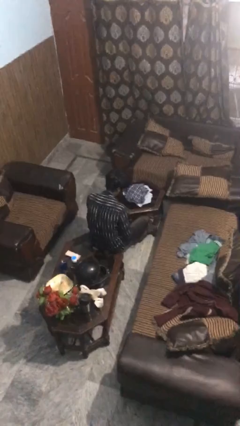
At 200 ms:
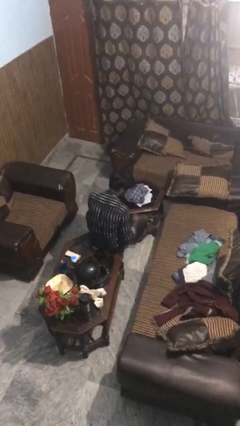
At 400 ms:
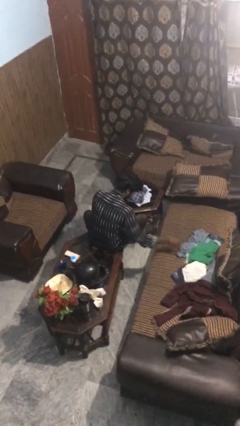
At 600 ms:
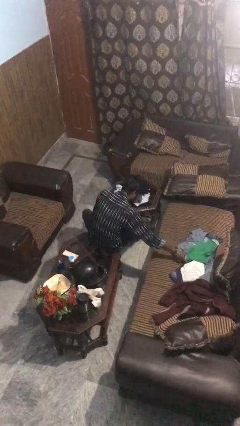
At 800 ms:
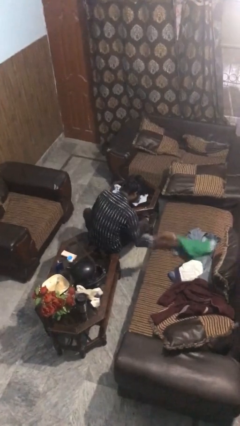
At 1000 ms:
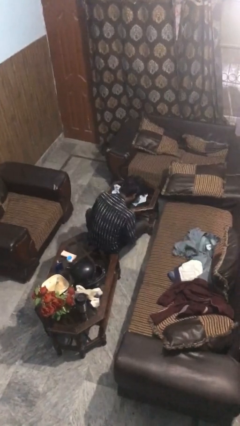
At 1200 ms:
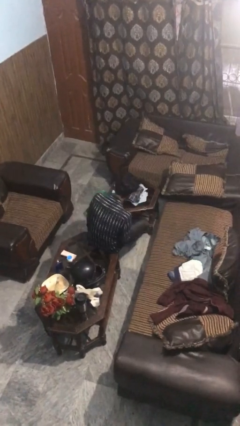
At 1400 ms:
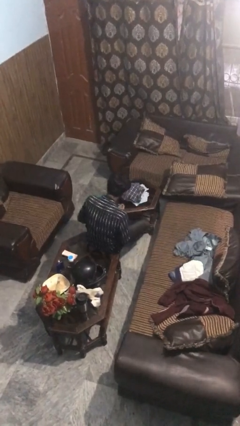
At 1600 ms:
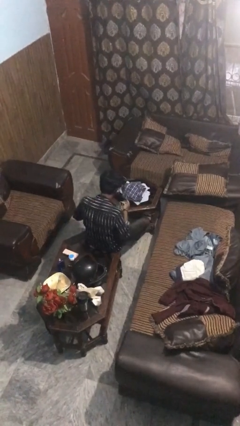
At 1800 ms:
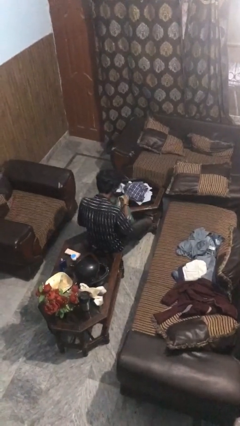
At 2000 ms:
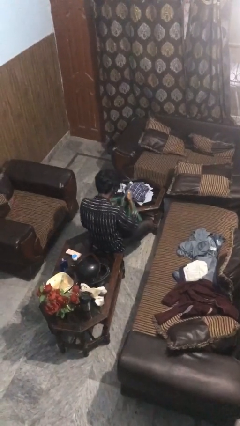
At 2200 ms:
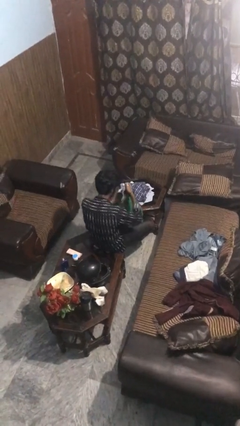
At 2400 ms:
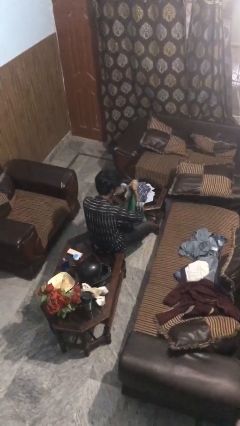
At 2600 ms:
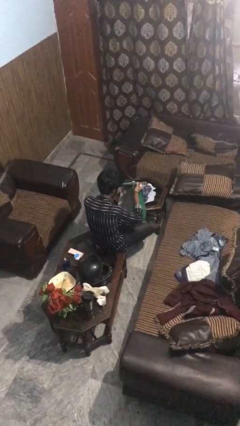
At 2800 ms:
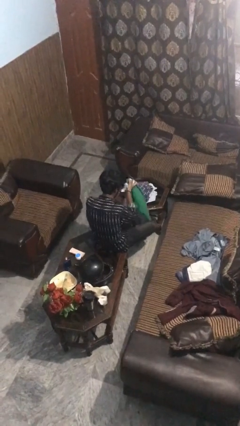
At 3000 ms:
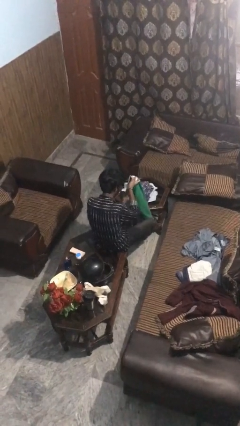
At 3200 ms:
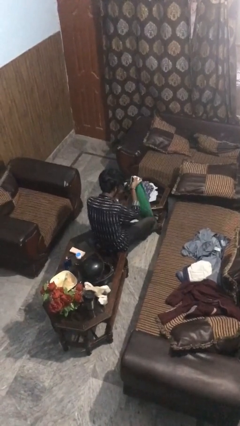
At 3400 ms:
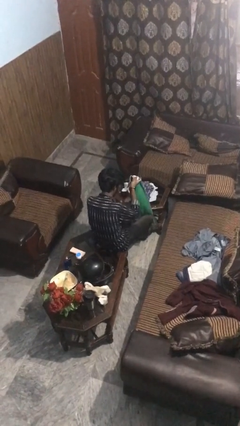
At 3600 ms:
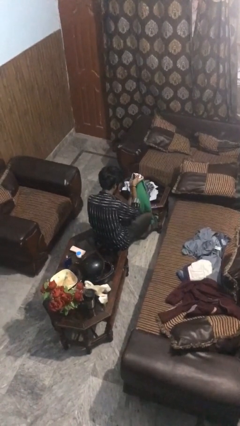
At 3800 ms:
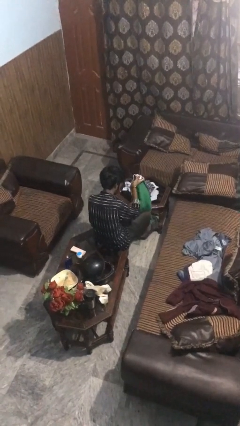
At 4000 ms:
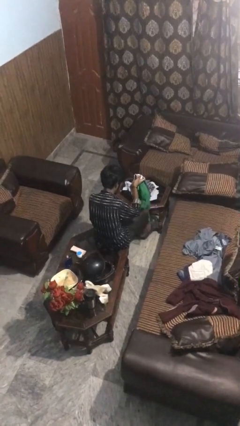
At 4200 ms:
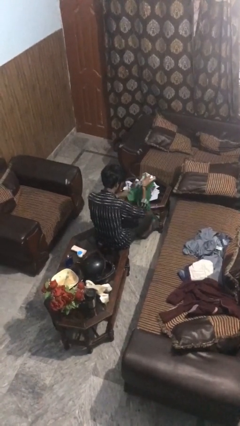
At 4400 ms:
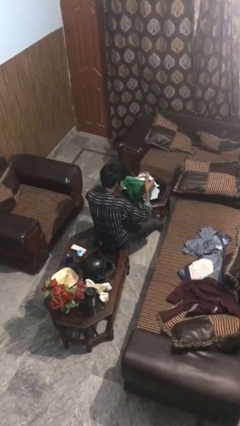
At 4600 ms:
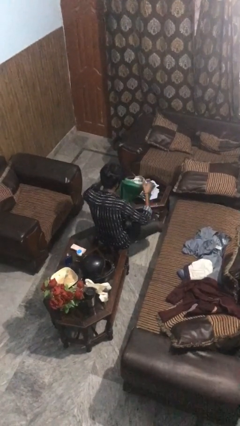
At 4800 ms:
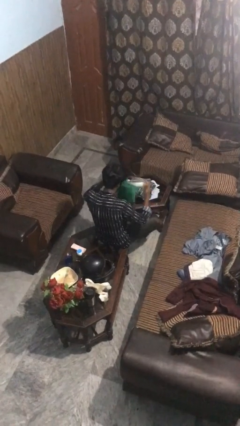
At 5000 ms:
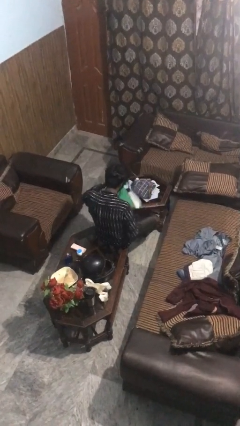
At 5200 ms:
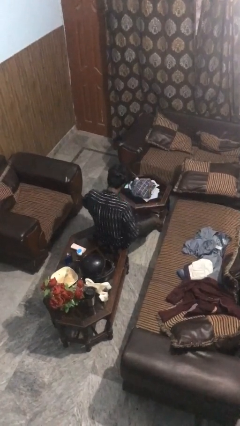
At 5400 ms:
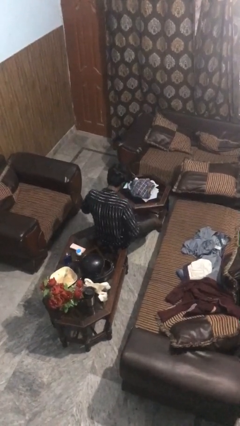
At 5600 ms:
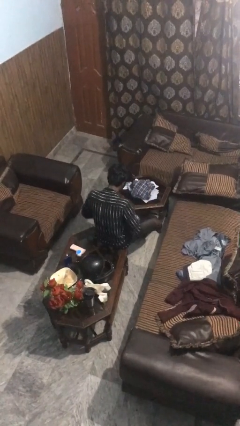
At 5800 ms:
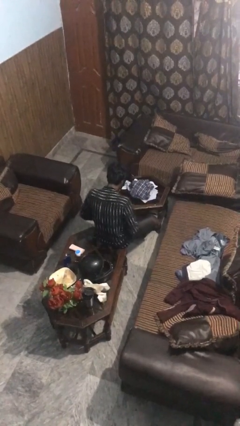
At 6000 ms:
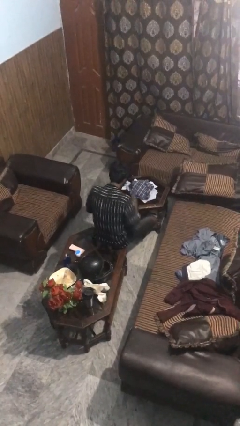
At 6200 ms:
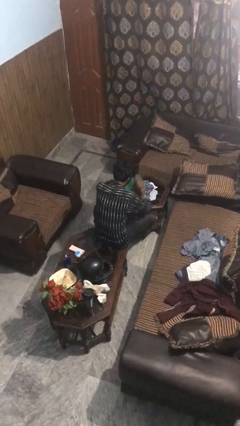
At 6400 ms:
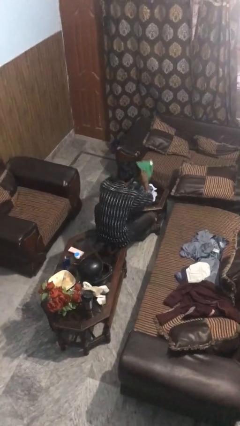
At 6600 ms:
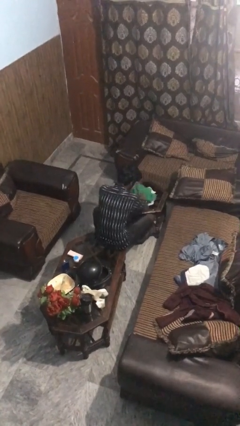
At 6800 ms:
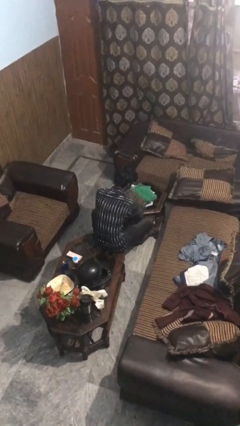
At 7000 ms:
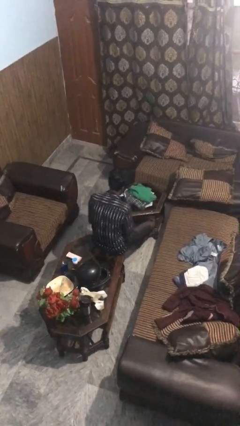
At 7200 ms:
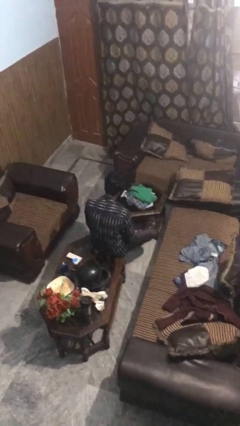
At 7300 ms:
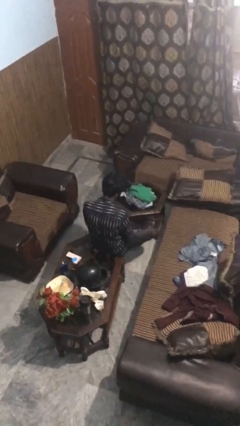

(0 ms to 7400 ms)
person folds shirt

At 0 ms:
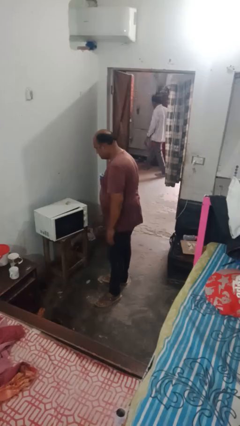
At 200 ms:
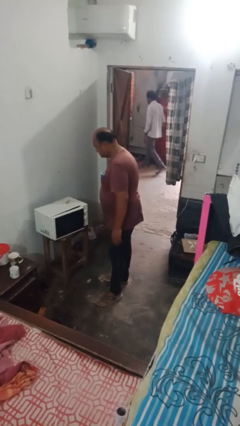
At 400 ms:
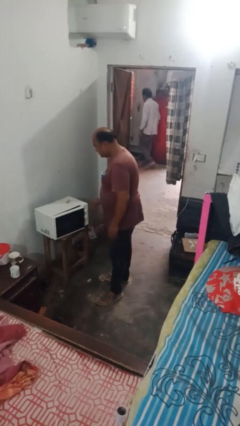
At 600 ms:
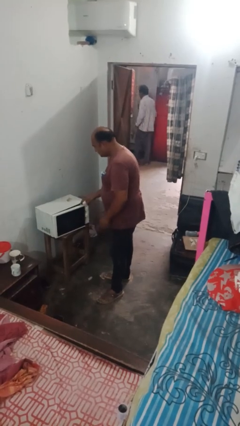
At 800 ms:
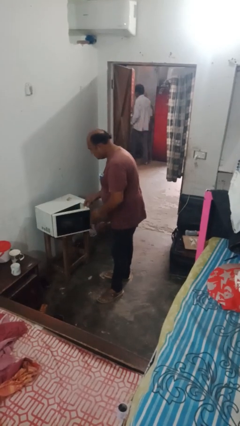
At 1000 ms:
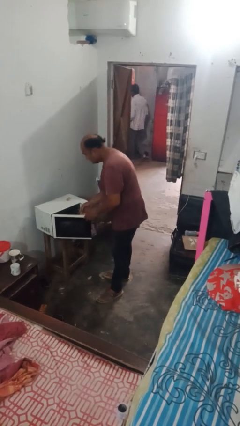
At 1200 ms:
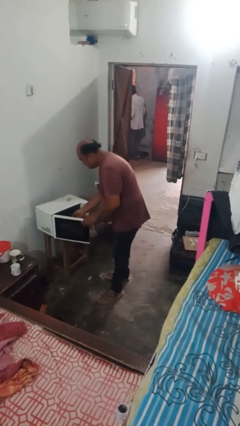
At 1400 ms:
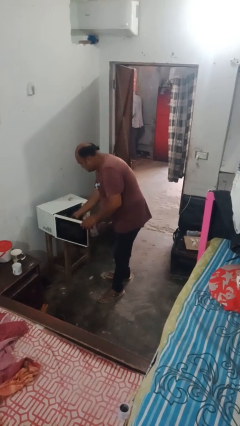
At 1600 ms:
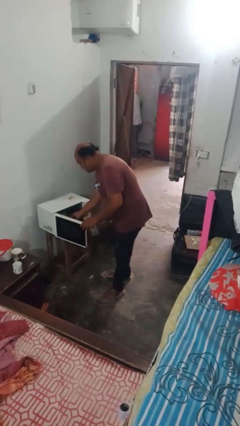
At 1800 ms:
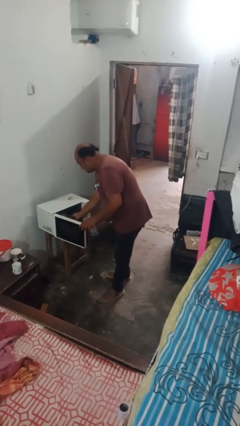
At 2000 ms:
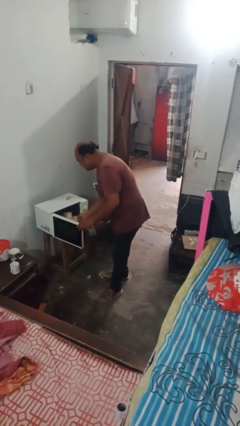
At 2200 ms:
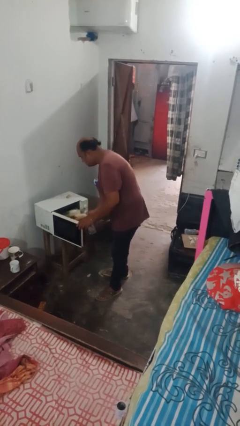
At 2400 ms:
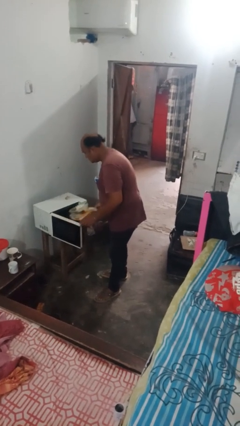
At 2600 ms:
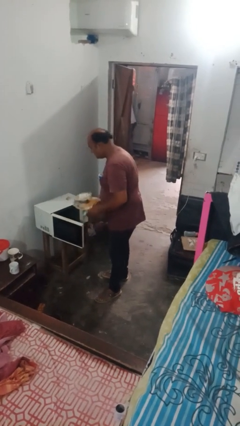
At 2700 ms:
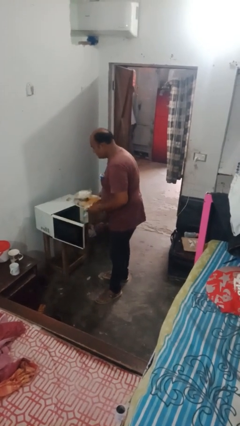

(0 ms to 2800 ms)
person takes object from microwave

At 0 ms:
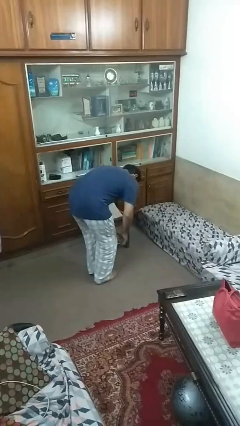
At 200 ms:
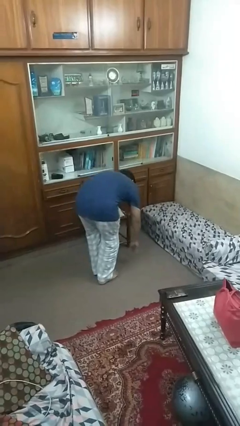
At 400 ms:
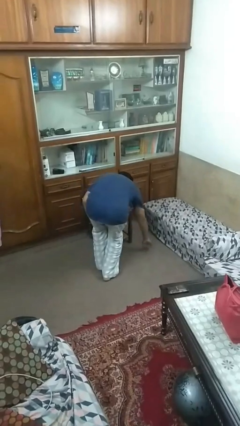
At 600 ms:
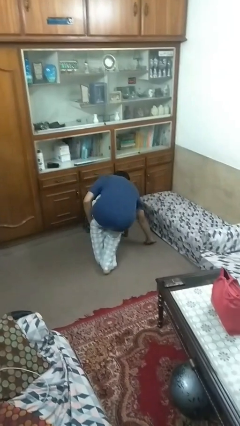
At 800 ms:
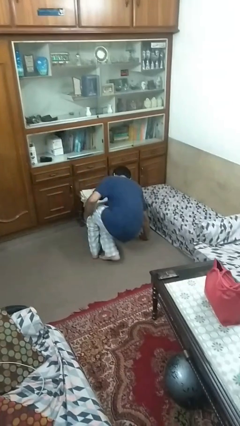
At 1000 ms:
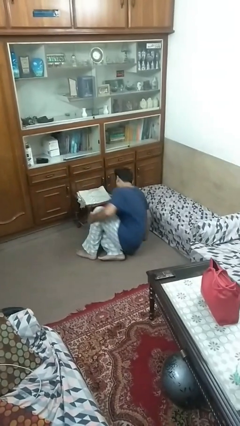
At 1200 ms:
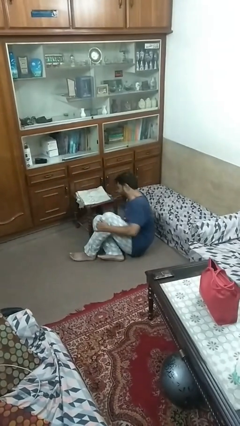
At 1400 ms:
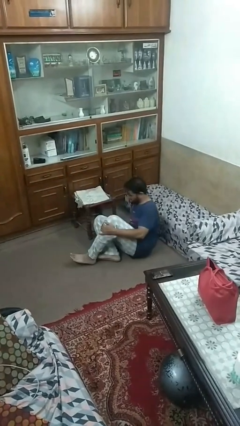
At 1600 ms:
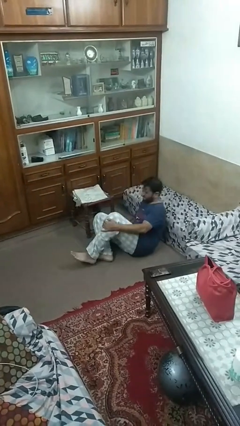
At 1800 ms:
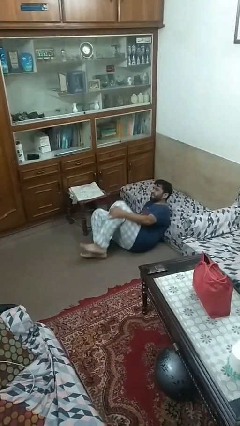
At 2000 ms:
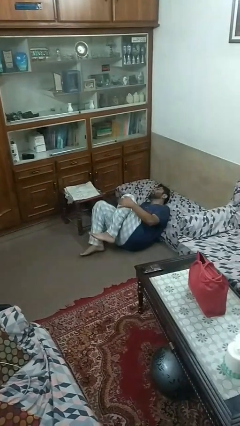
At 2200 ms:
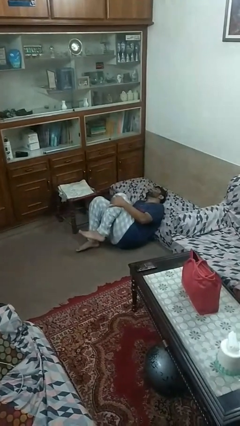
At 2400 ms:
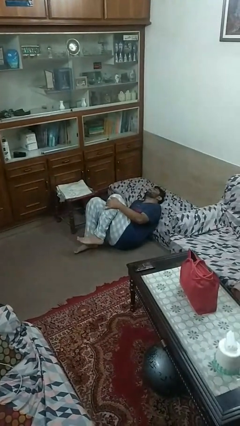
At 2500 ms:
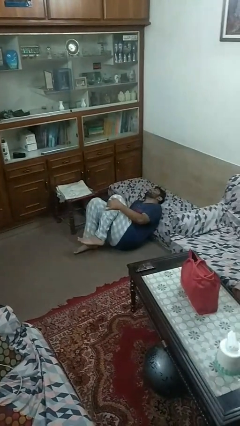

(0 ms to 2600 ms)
person lies down on floor

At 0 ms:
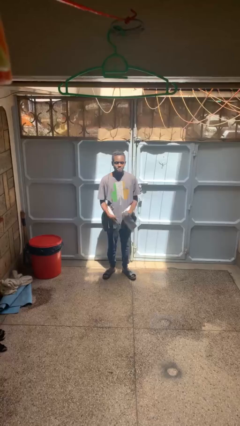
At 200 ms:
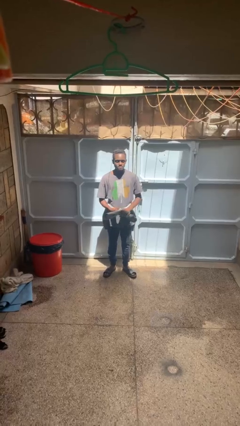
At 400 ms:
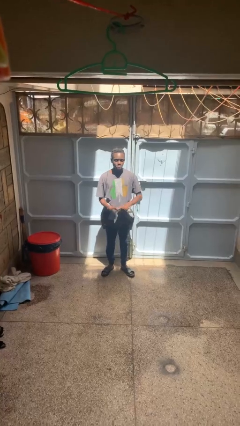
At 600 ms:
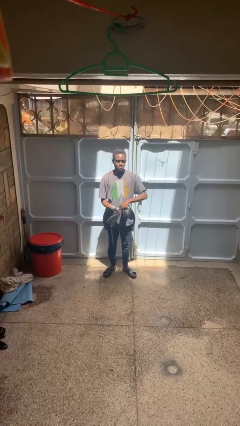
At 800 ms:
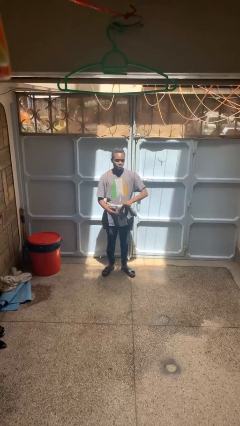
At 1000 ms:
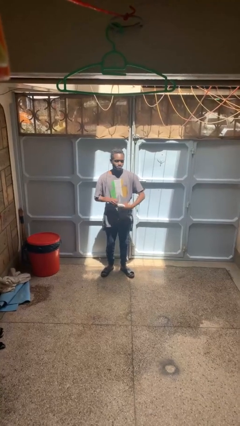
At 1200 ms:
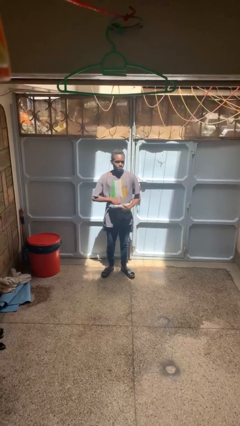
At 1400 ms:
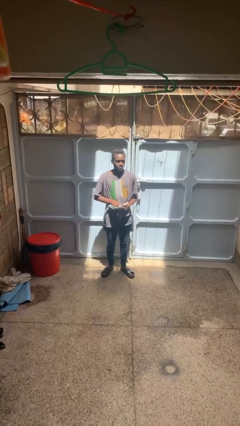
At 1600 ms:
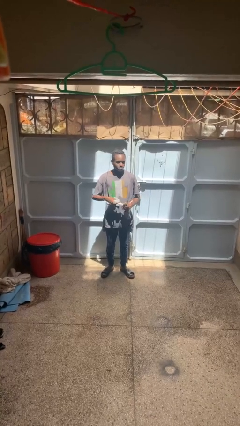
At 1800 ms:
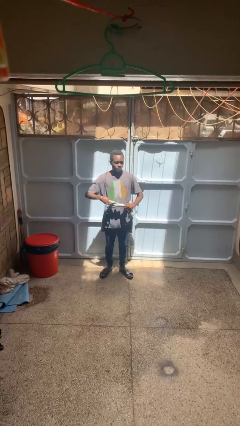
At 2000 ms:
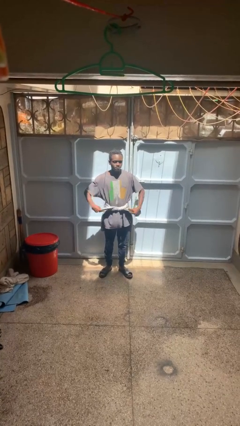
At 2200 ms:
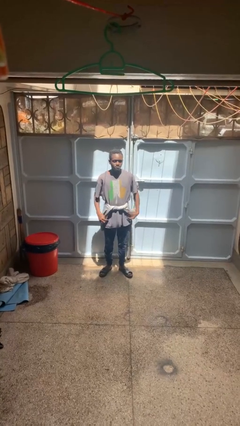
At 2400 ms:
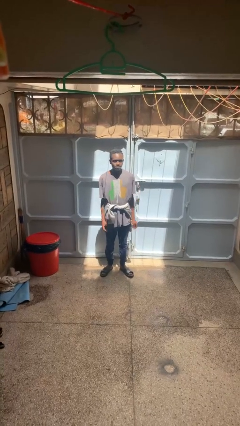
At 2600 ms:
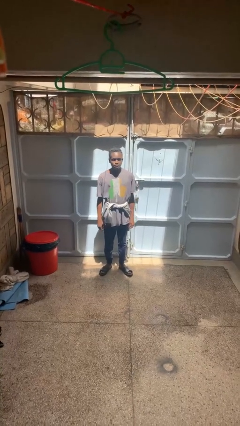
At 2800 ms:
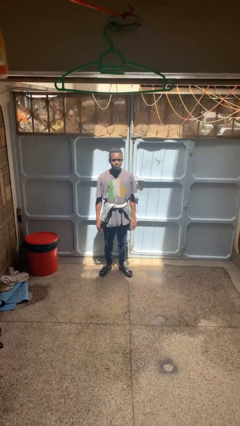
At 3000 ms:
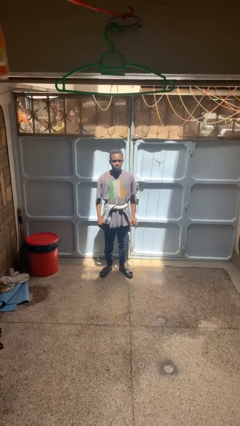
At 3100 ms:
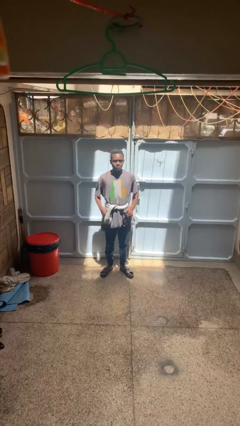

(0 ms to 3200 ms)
person ties jacket around waist

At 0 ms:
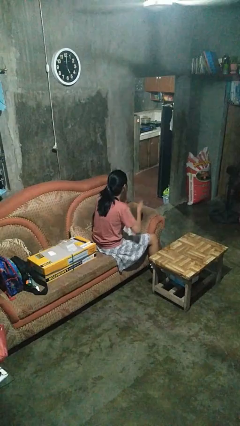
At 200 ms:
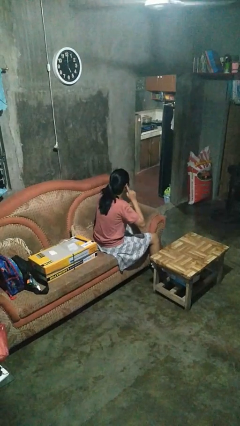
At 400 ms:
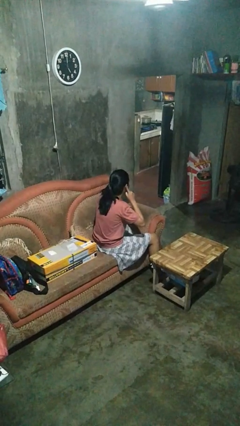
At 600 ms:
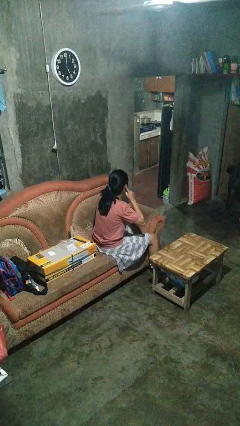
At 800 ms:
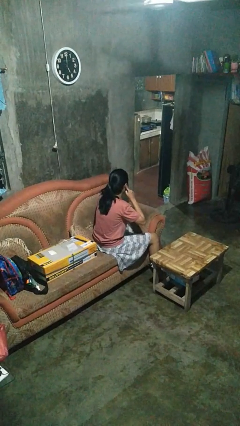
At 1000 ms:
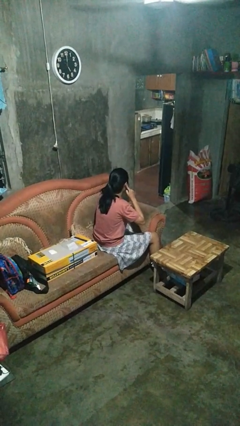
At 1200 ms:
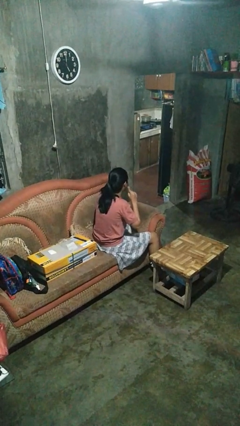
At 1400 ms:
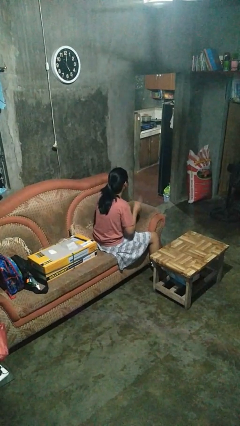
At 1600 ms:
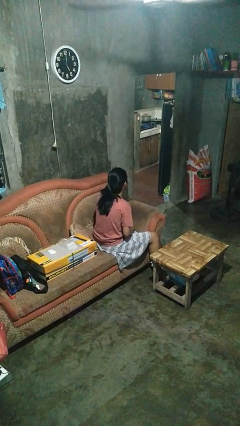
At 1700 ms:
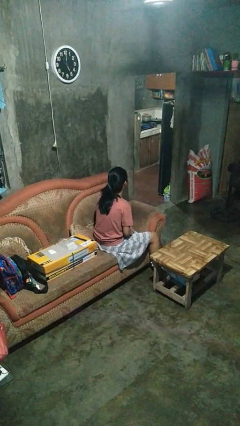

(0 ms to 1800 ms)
person puts fingers in ear
